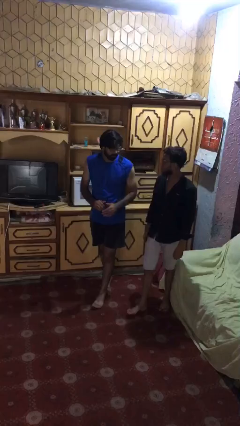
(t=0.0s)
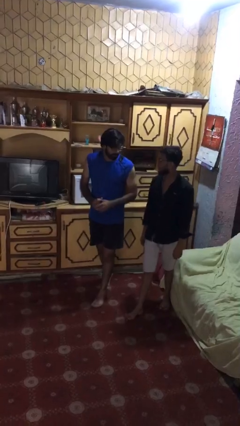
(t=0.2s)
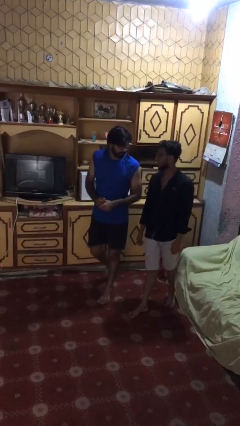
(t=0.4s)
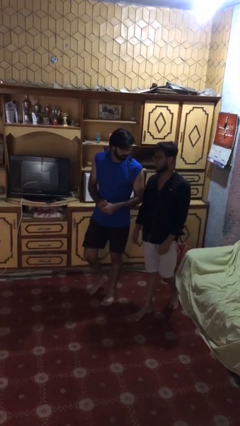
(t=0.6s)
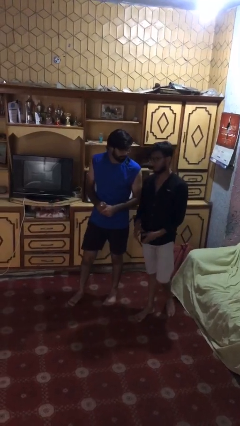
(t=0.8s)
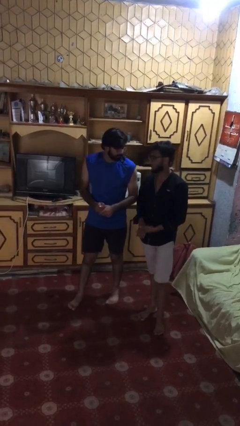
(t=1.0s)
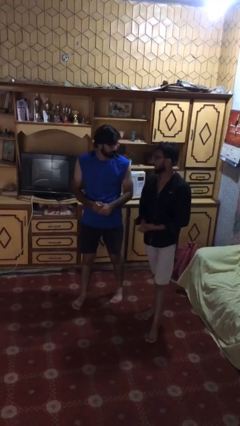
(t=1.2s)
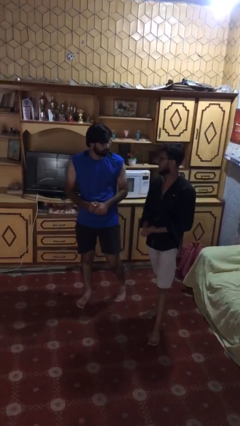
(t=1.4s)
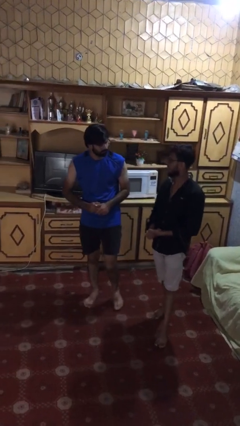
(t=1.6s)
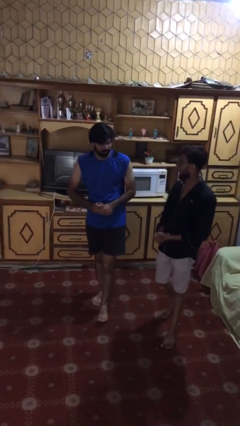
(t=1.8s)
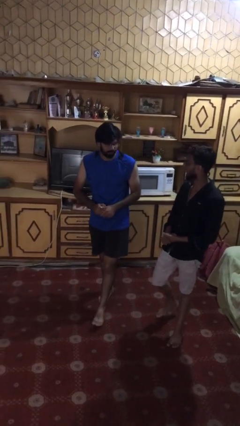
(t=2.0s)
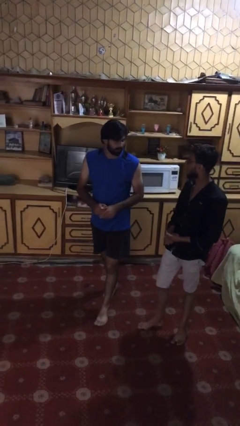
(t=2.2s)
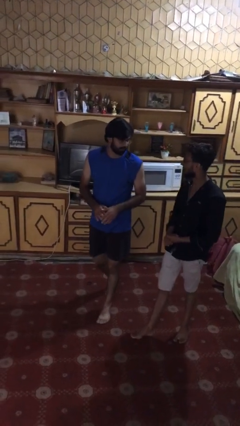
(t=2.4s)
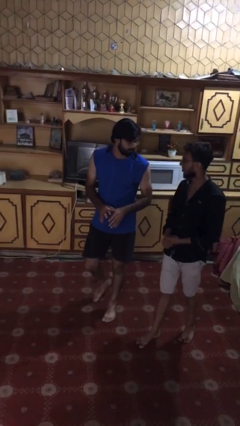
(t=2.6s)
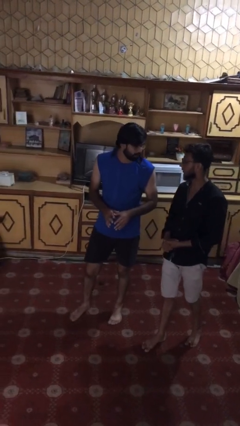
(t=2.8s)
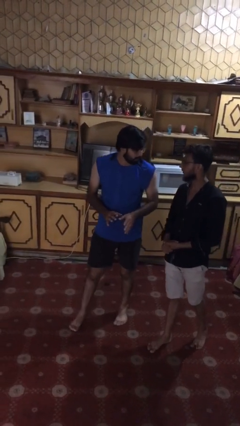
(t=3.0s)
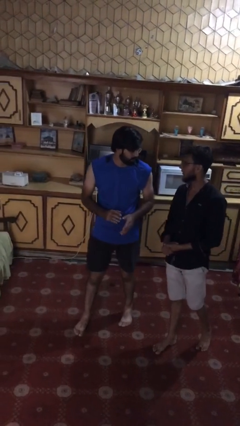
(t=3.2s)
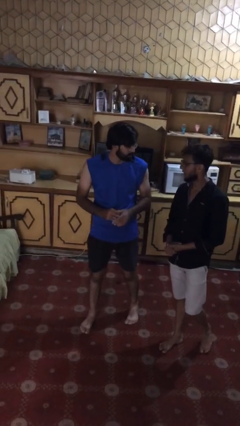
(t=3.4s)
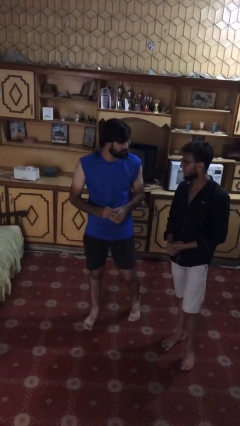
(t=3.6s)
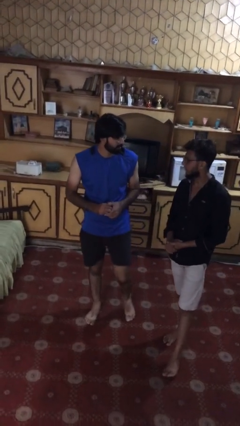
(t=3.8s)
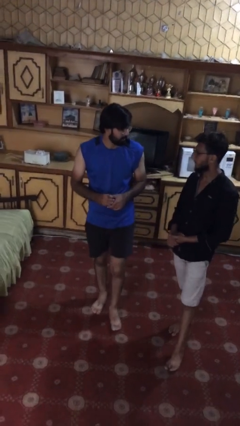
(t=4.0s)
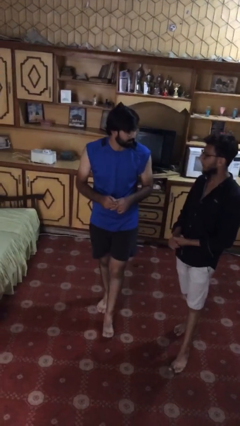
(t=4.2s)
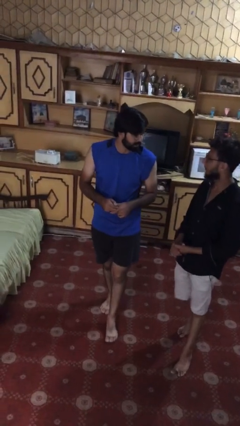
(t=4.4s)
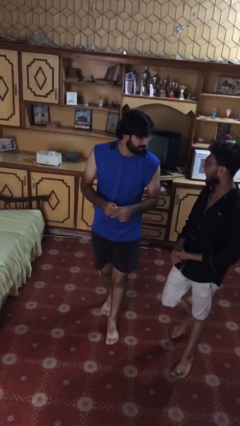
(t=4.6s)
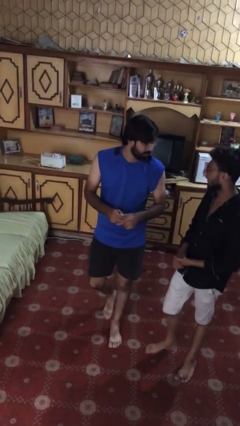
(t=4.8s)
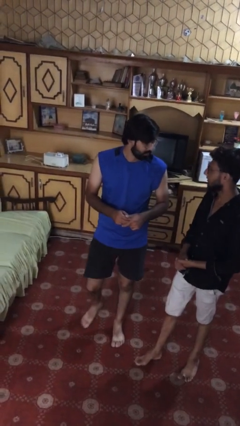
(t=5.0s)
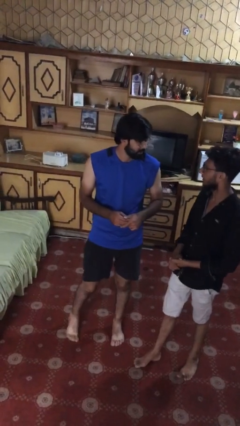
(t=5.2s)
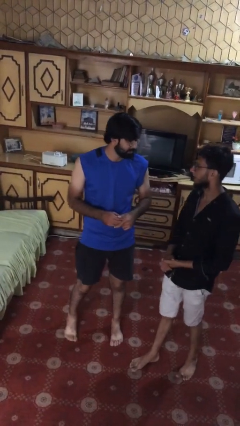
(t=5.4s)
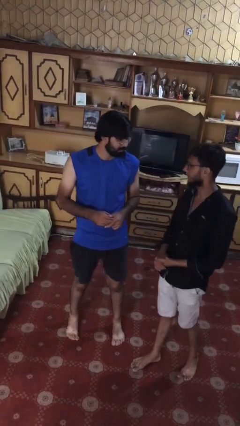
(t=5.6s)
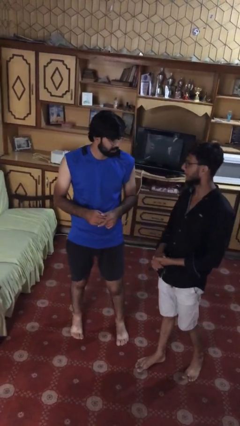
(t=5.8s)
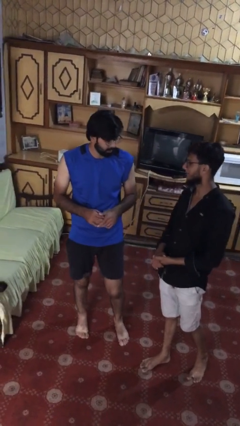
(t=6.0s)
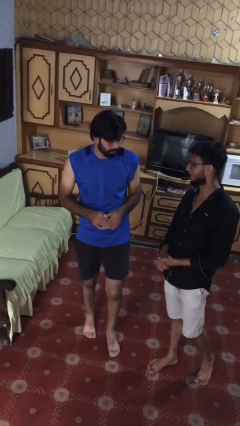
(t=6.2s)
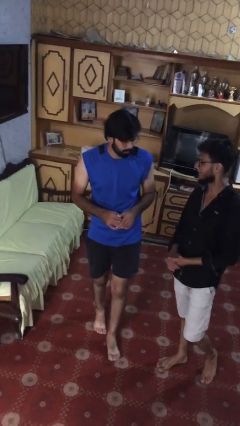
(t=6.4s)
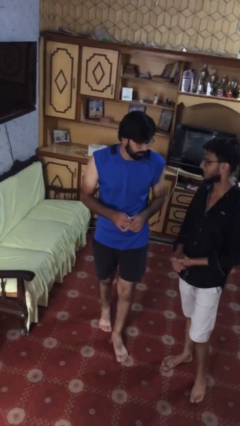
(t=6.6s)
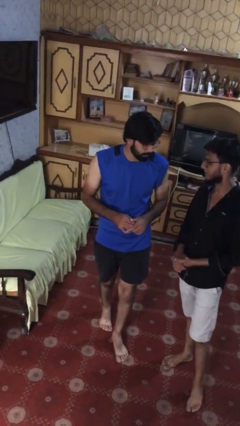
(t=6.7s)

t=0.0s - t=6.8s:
person talks to person

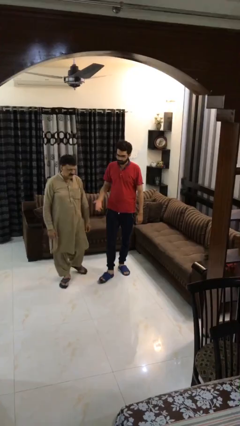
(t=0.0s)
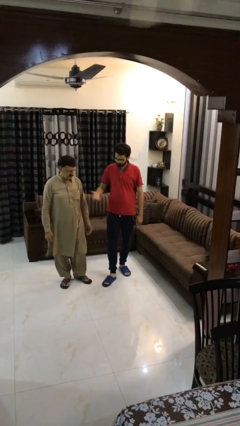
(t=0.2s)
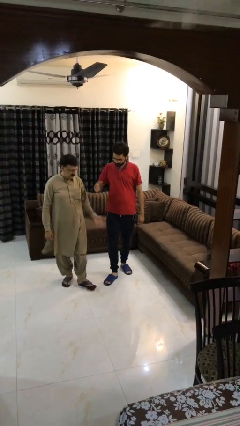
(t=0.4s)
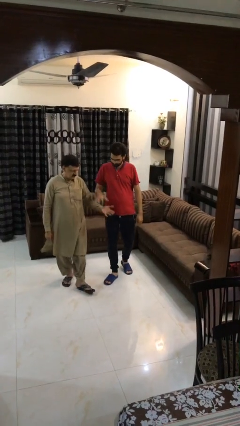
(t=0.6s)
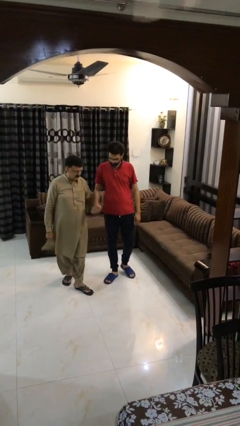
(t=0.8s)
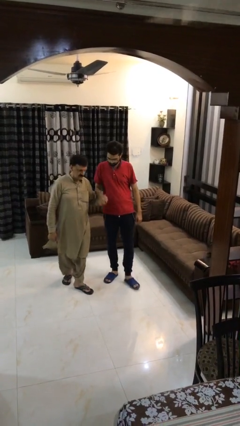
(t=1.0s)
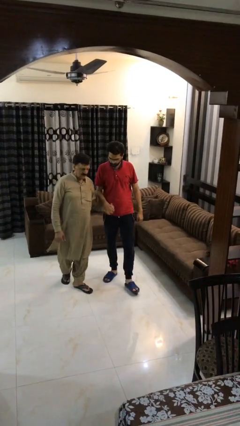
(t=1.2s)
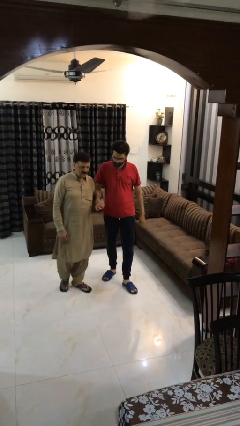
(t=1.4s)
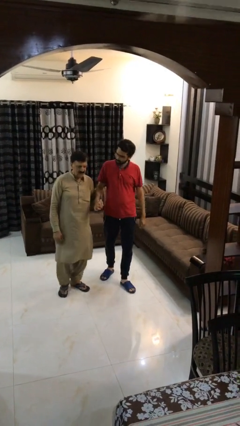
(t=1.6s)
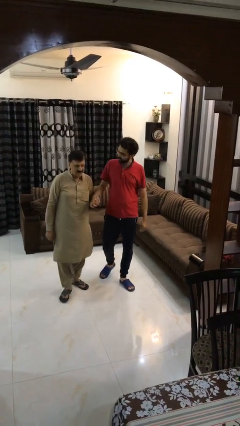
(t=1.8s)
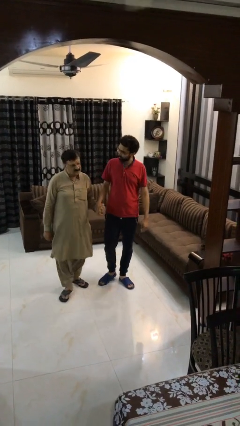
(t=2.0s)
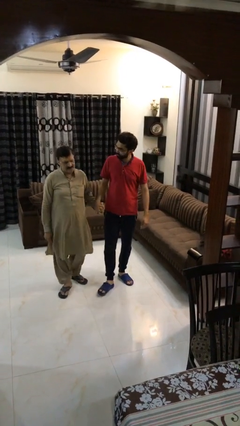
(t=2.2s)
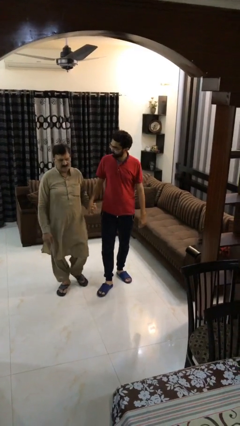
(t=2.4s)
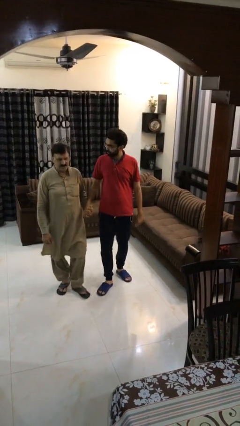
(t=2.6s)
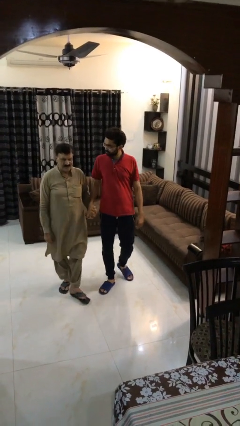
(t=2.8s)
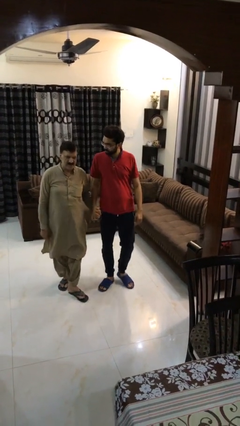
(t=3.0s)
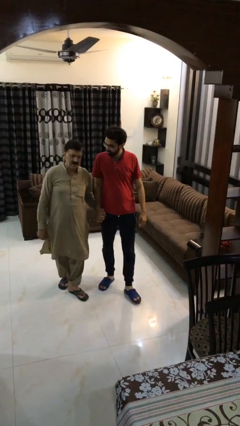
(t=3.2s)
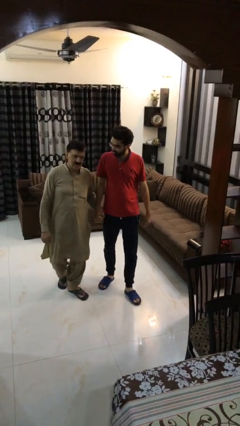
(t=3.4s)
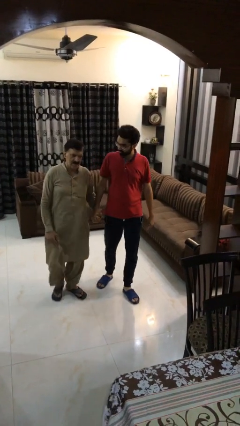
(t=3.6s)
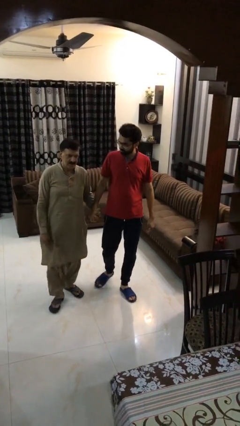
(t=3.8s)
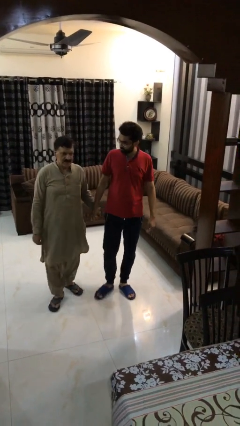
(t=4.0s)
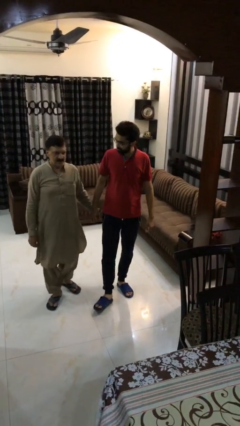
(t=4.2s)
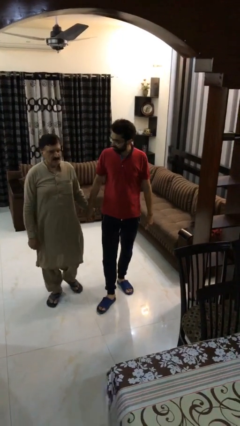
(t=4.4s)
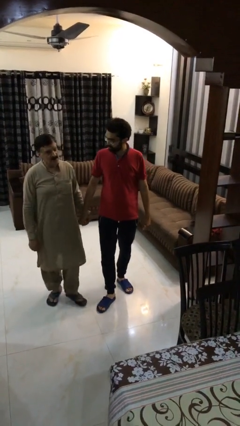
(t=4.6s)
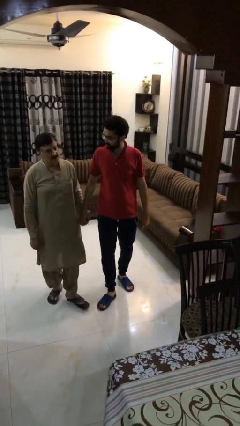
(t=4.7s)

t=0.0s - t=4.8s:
person holds hand

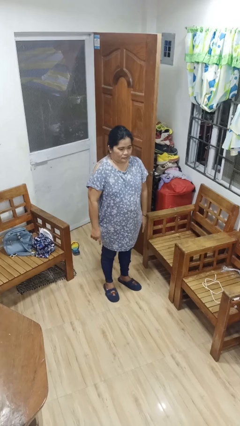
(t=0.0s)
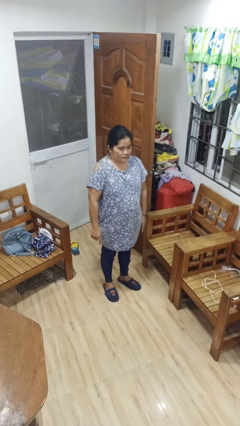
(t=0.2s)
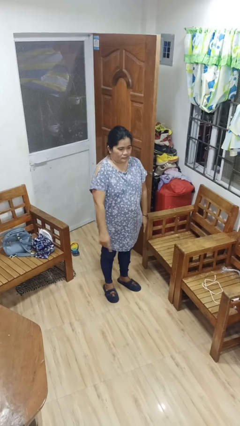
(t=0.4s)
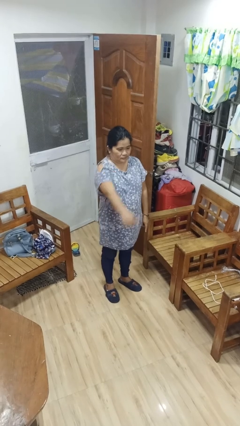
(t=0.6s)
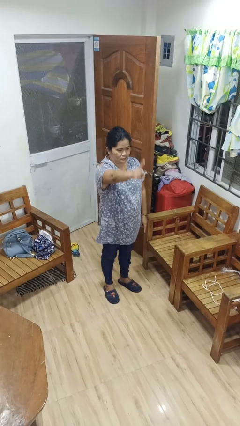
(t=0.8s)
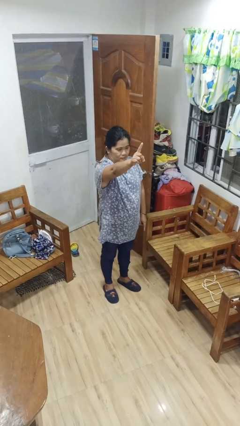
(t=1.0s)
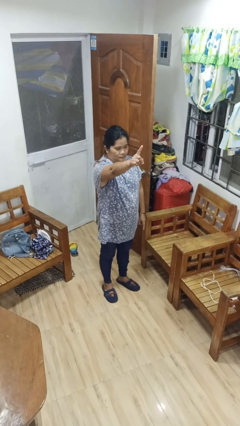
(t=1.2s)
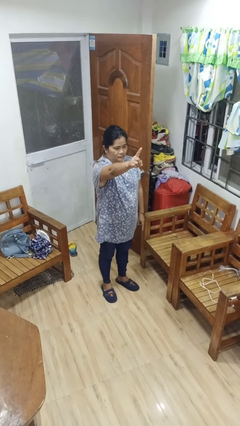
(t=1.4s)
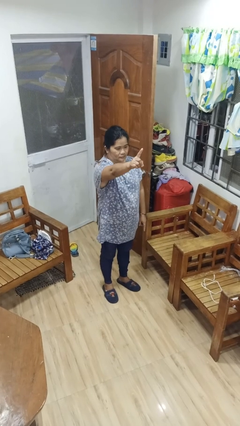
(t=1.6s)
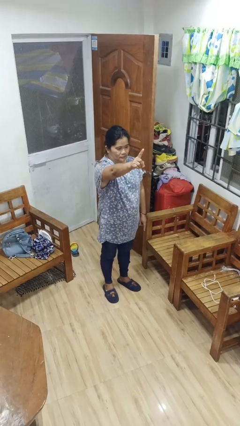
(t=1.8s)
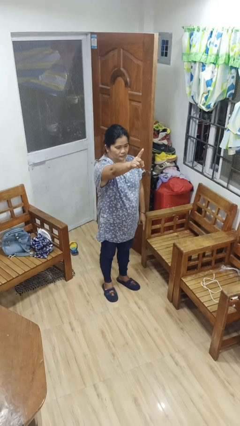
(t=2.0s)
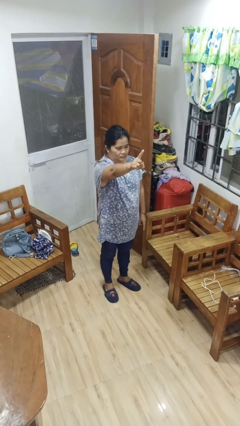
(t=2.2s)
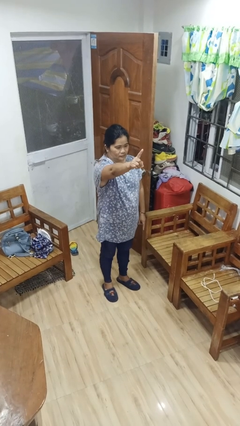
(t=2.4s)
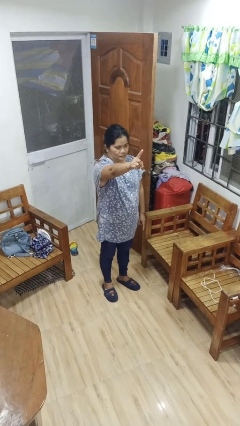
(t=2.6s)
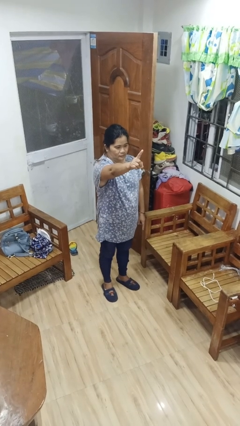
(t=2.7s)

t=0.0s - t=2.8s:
person gestures number one

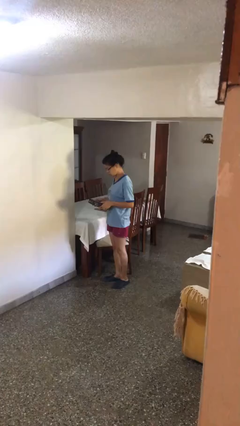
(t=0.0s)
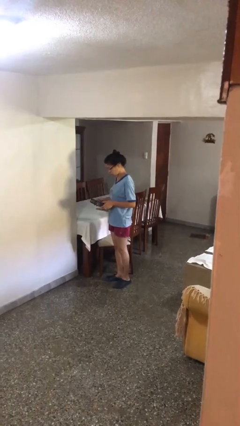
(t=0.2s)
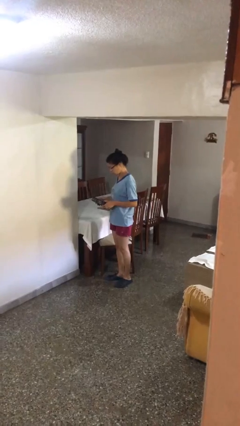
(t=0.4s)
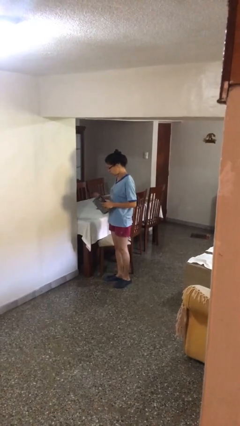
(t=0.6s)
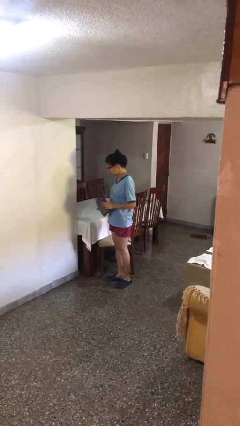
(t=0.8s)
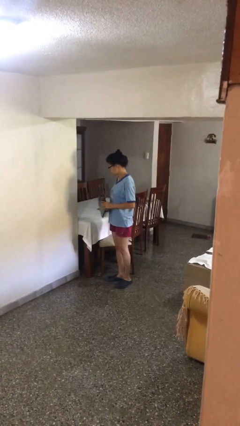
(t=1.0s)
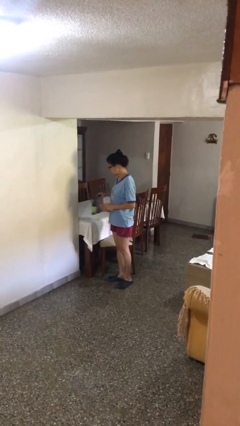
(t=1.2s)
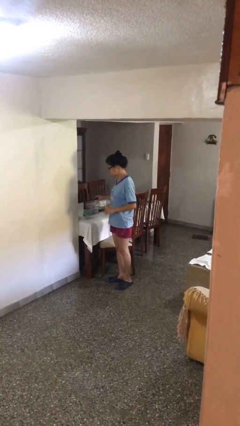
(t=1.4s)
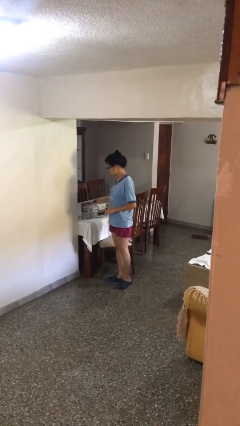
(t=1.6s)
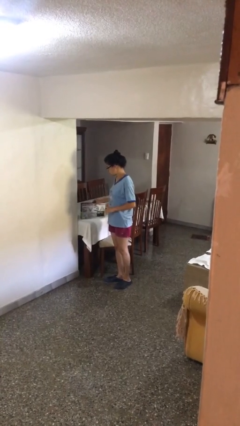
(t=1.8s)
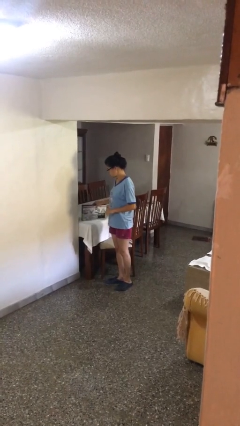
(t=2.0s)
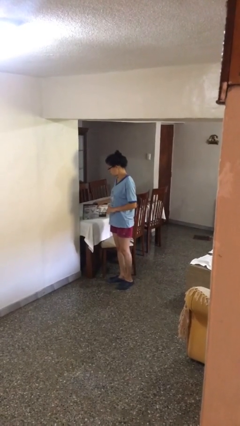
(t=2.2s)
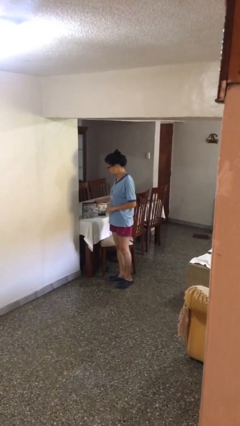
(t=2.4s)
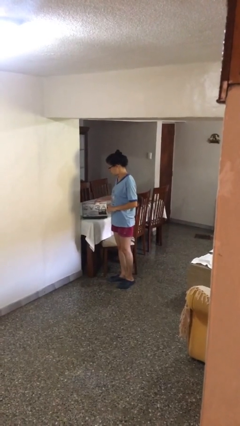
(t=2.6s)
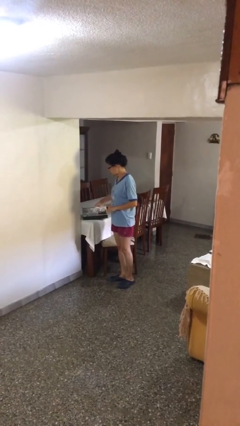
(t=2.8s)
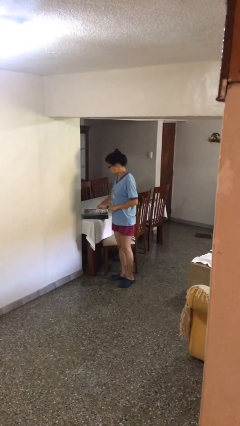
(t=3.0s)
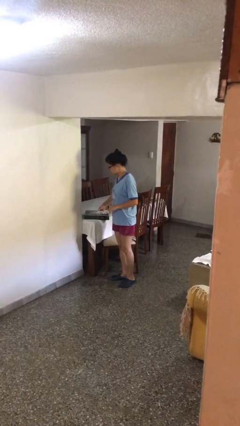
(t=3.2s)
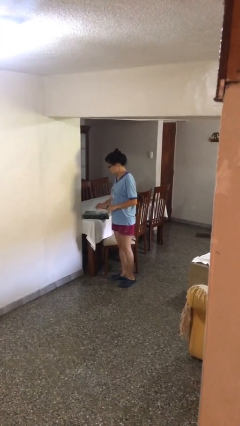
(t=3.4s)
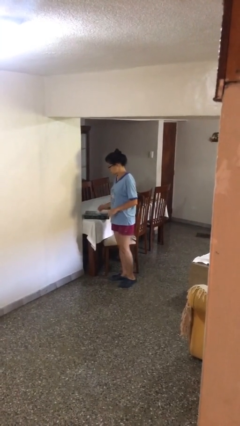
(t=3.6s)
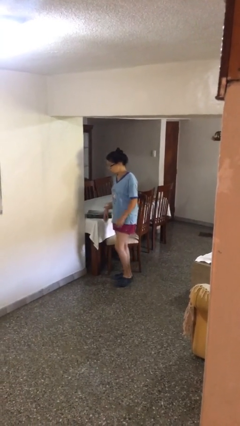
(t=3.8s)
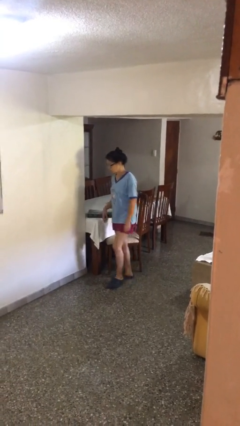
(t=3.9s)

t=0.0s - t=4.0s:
person puts down object on table
